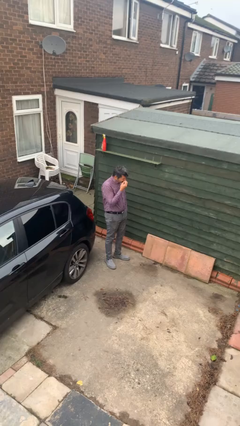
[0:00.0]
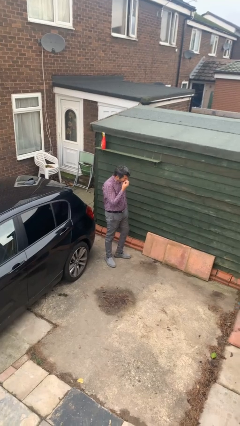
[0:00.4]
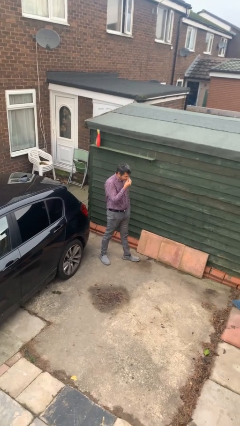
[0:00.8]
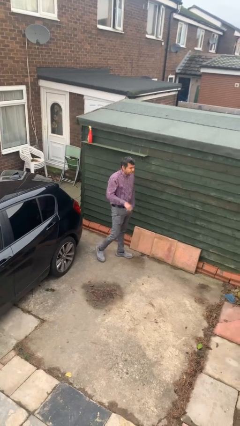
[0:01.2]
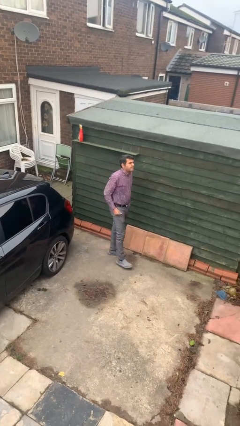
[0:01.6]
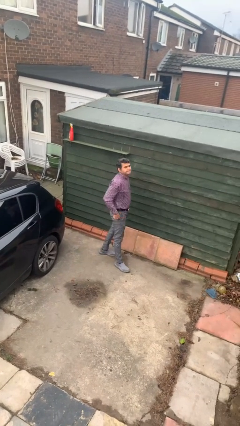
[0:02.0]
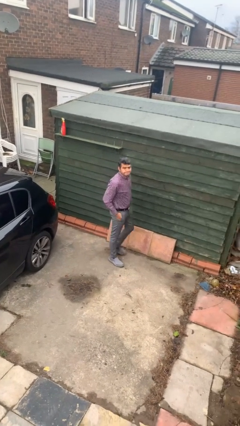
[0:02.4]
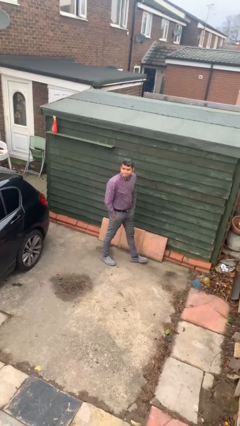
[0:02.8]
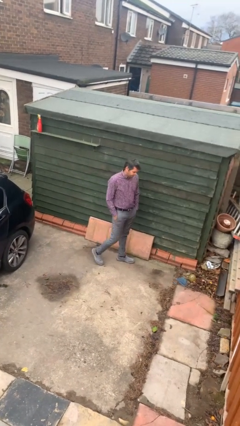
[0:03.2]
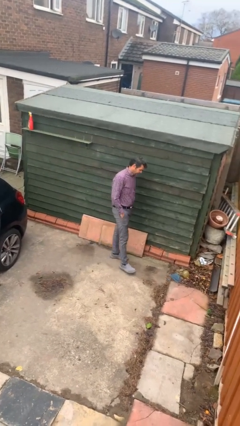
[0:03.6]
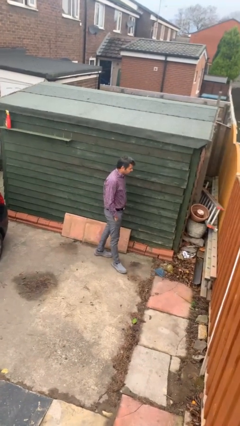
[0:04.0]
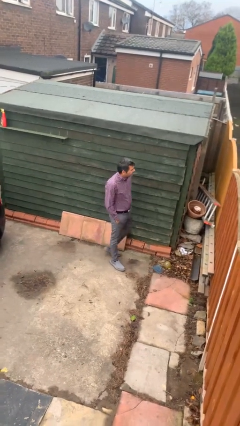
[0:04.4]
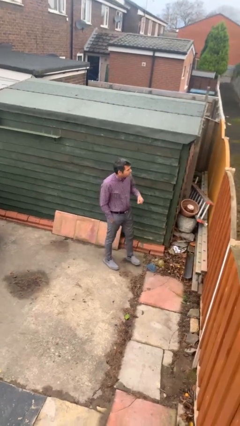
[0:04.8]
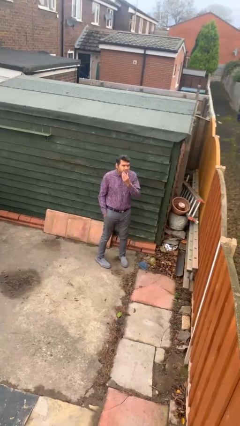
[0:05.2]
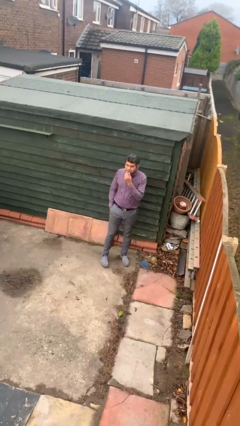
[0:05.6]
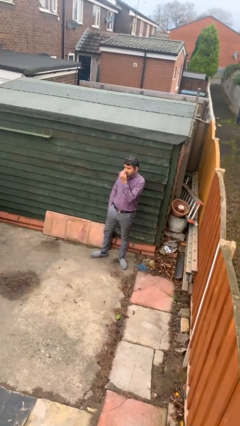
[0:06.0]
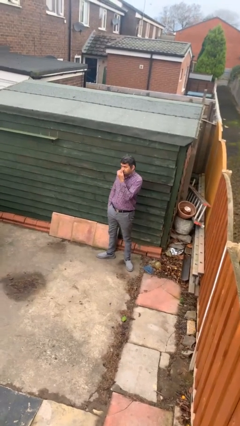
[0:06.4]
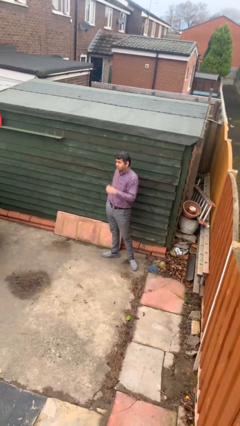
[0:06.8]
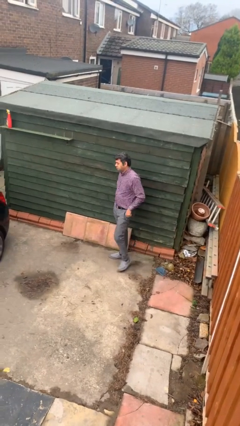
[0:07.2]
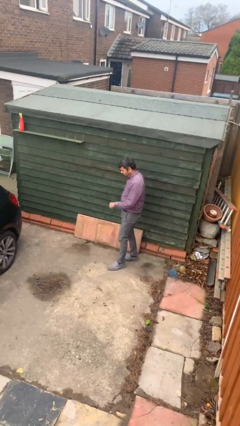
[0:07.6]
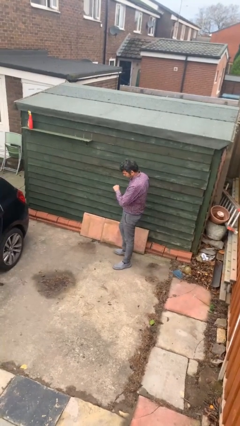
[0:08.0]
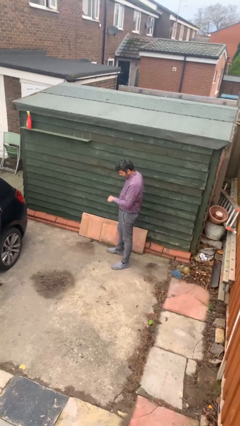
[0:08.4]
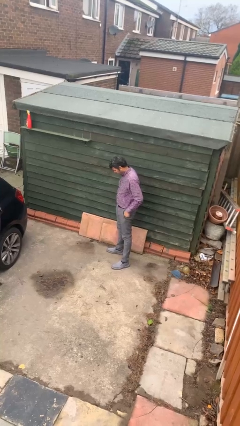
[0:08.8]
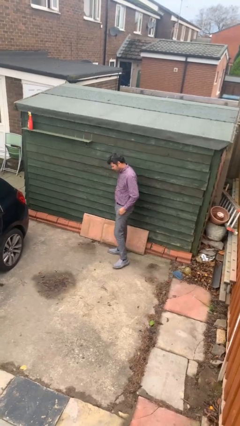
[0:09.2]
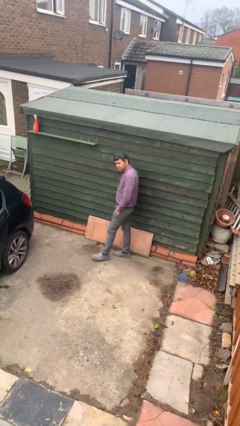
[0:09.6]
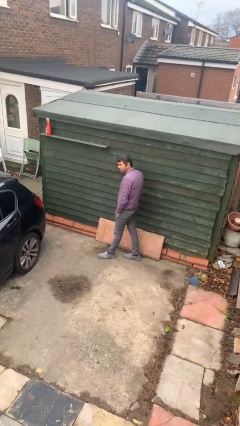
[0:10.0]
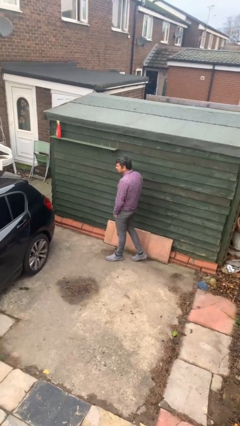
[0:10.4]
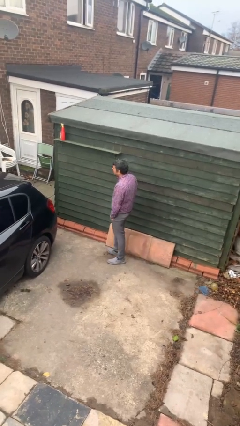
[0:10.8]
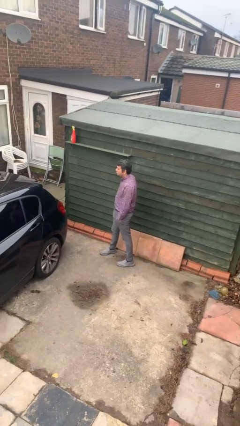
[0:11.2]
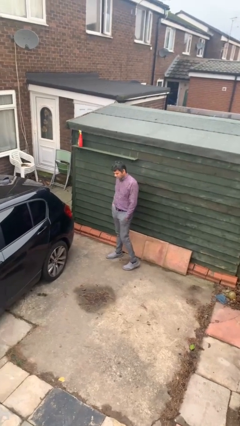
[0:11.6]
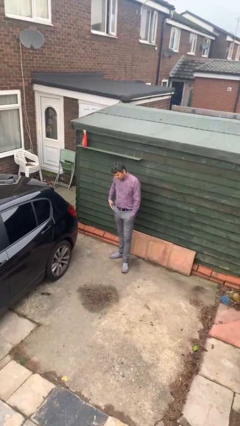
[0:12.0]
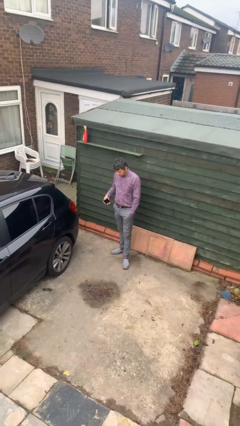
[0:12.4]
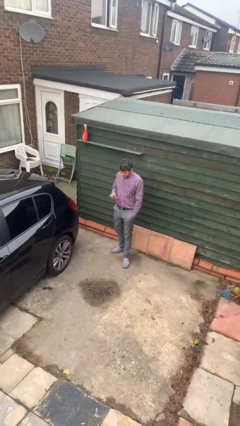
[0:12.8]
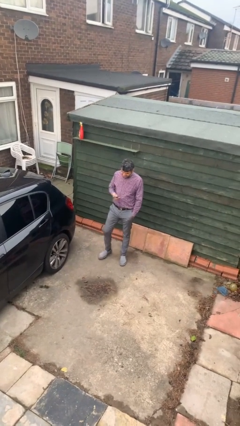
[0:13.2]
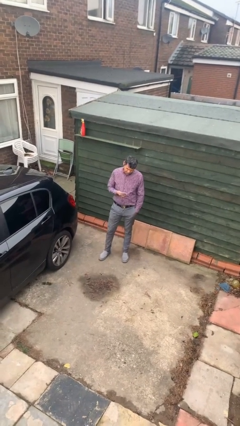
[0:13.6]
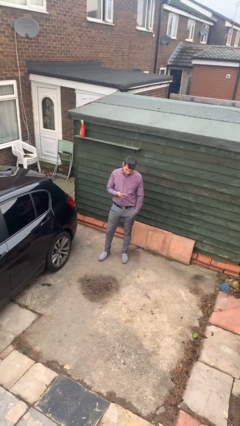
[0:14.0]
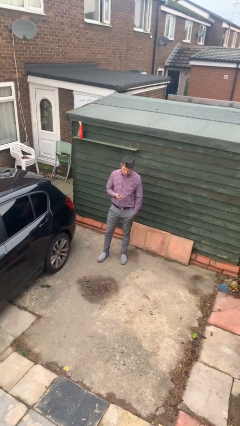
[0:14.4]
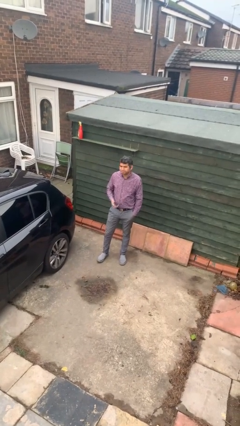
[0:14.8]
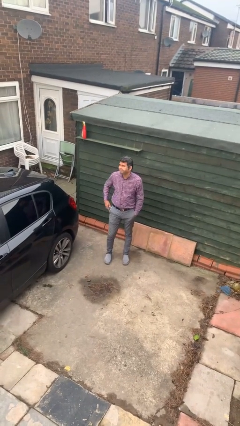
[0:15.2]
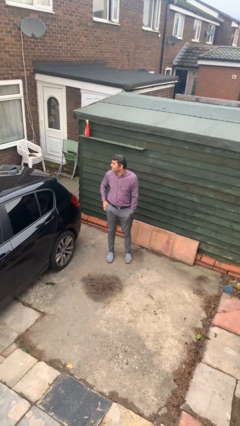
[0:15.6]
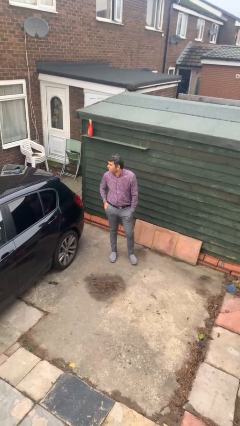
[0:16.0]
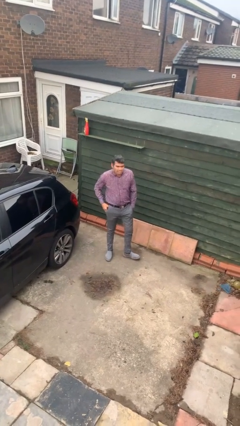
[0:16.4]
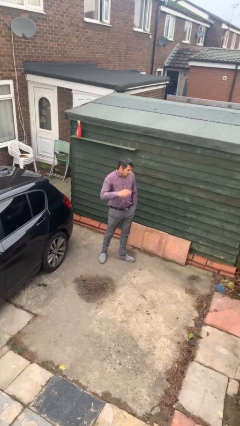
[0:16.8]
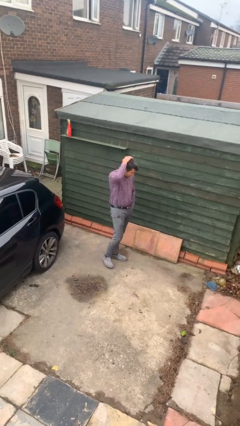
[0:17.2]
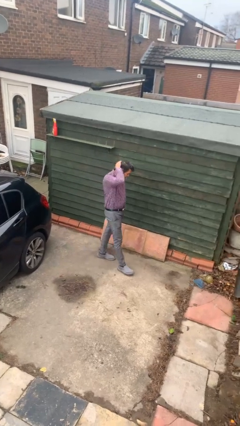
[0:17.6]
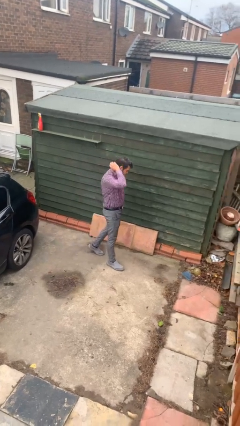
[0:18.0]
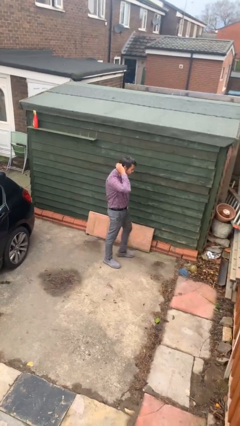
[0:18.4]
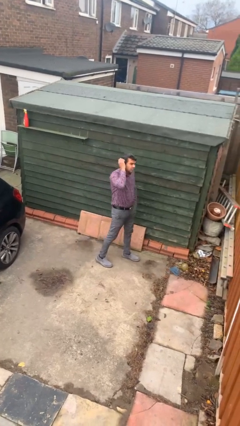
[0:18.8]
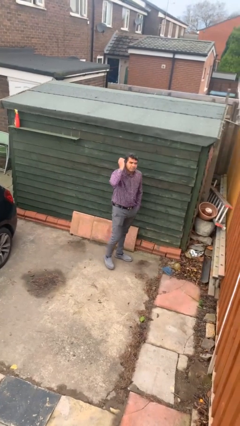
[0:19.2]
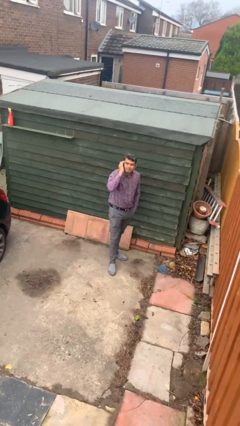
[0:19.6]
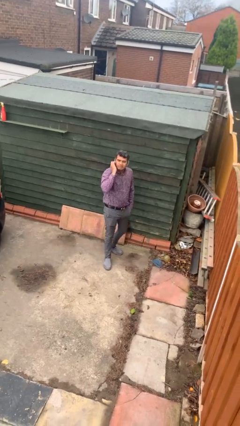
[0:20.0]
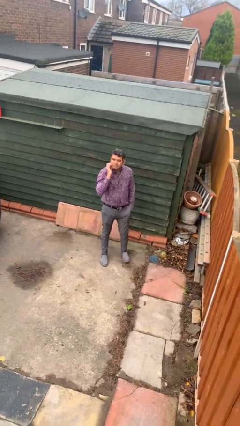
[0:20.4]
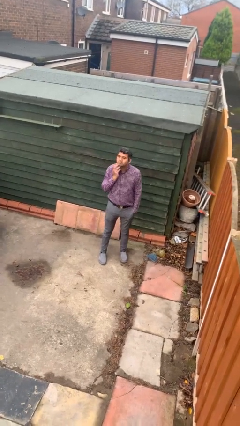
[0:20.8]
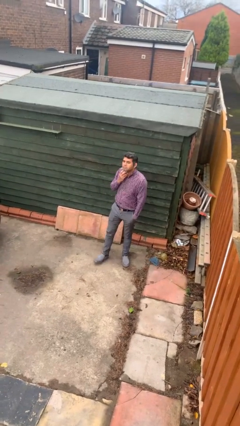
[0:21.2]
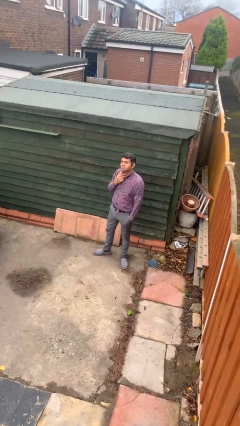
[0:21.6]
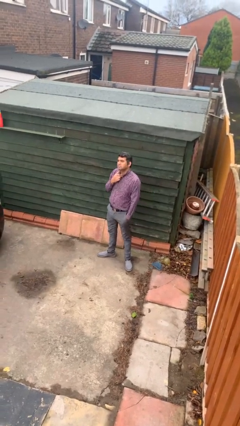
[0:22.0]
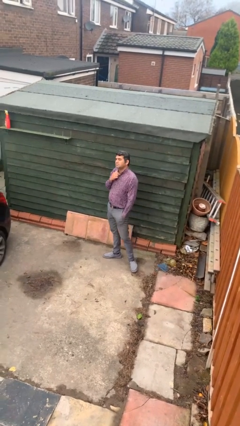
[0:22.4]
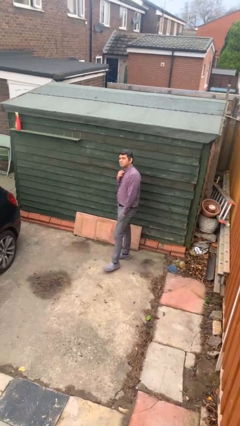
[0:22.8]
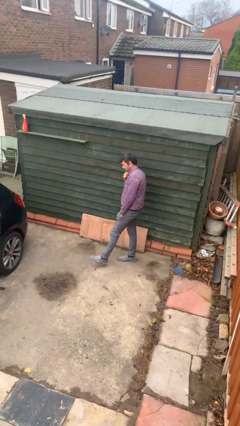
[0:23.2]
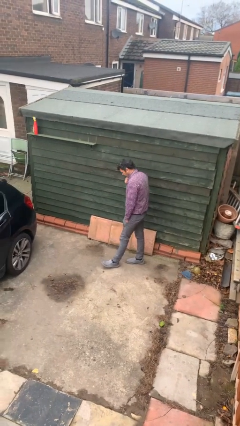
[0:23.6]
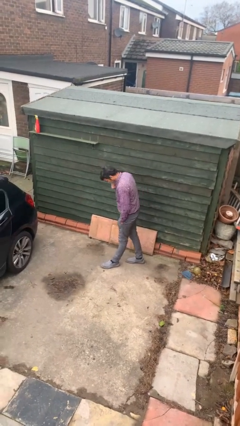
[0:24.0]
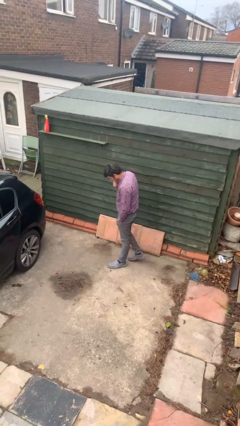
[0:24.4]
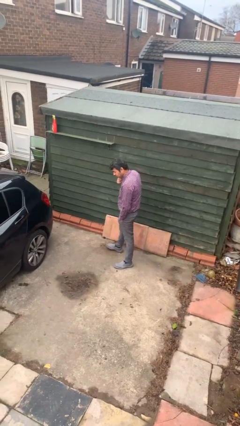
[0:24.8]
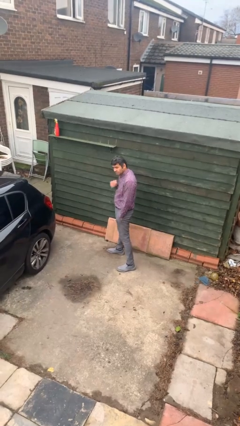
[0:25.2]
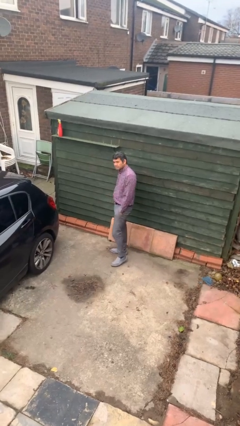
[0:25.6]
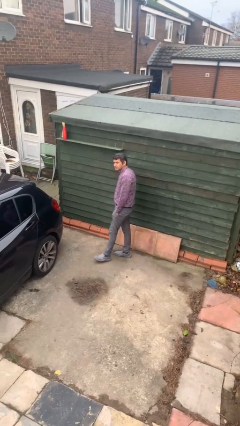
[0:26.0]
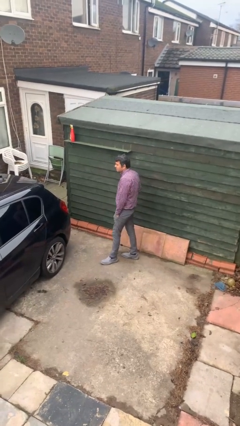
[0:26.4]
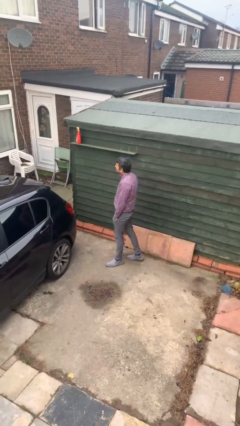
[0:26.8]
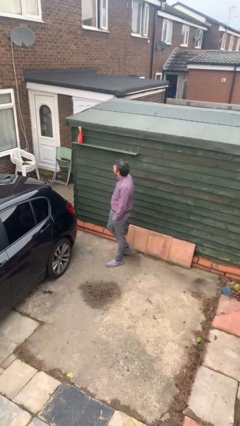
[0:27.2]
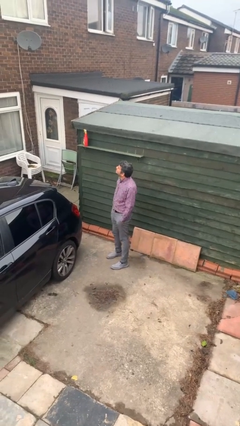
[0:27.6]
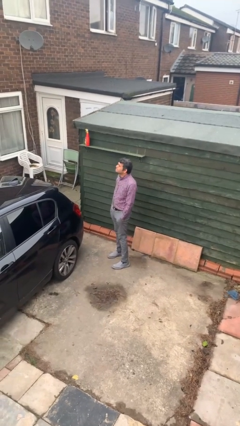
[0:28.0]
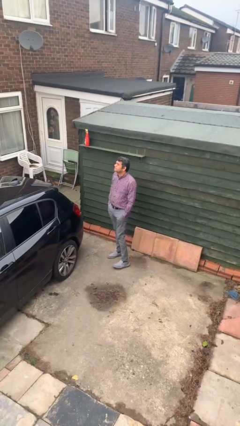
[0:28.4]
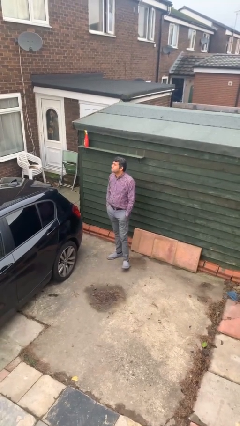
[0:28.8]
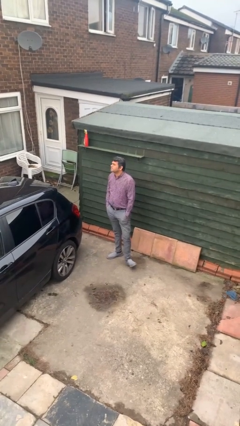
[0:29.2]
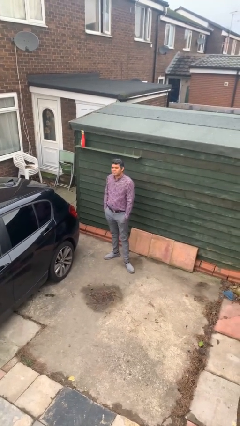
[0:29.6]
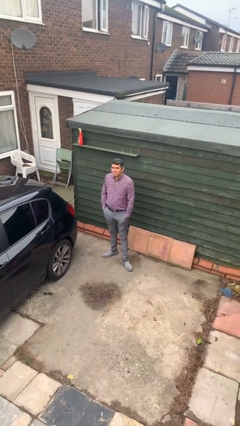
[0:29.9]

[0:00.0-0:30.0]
person walks

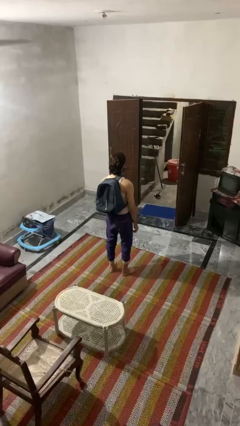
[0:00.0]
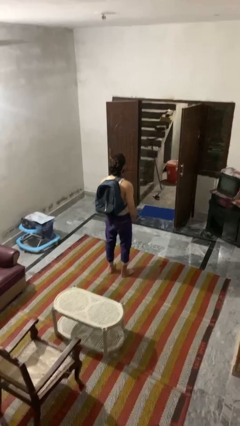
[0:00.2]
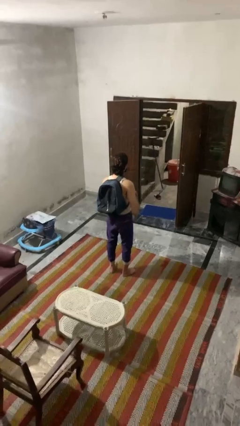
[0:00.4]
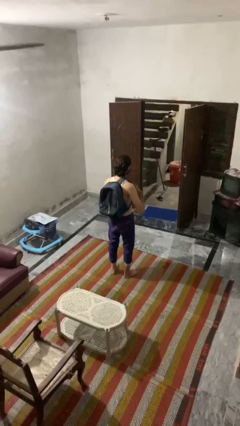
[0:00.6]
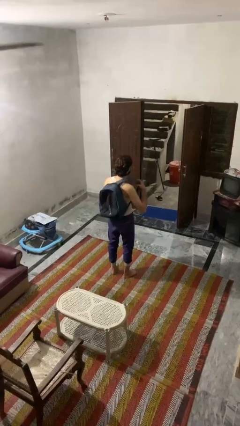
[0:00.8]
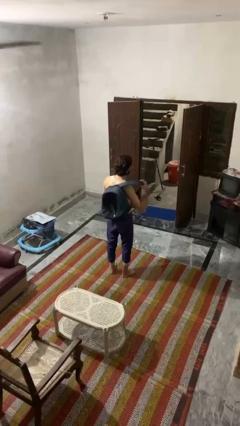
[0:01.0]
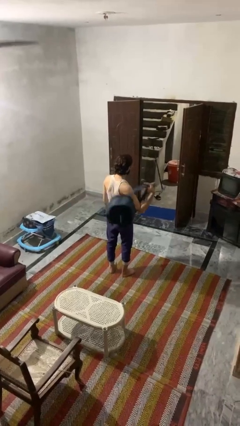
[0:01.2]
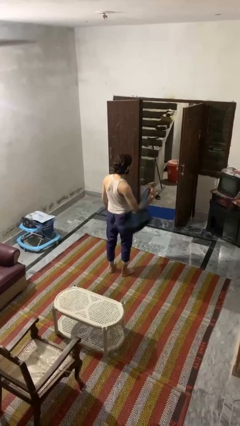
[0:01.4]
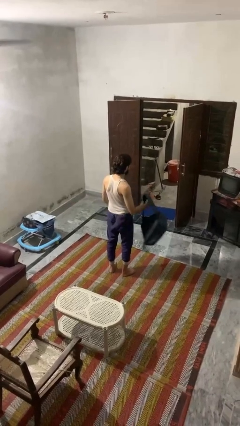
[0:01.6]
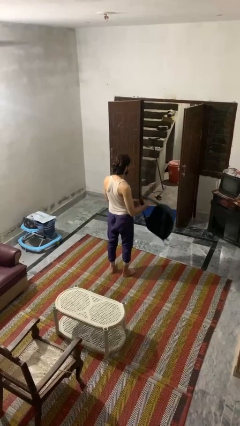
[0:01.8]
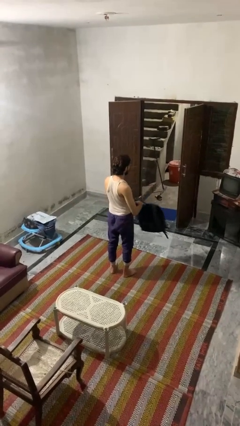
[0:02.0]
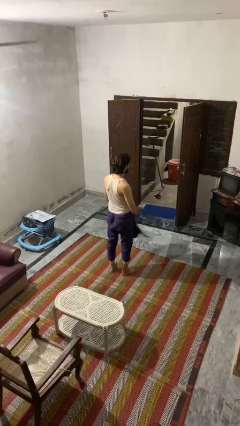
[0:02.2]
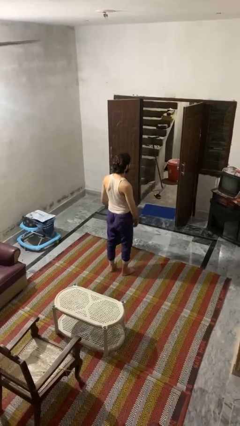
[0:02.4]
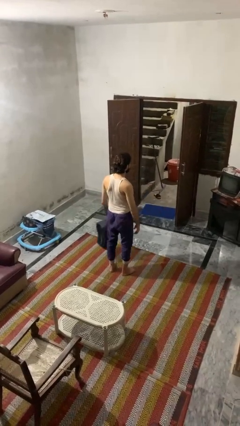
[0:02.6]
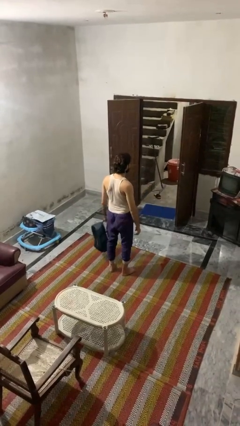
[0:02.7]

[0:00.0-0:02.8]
person takes off backpack

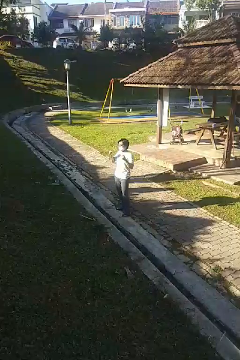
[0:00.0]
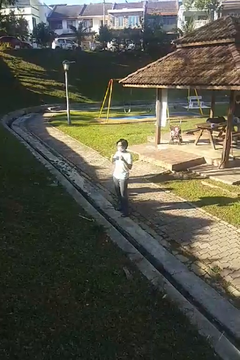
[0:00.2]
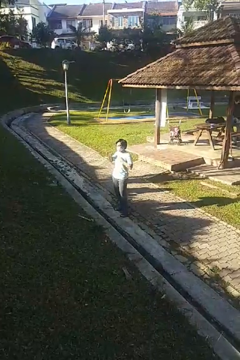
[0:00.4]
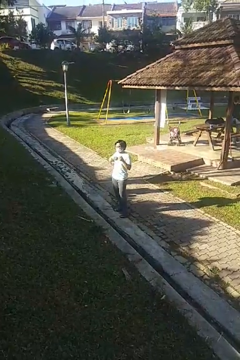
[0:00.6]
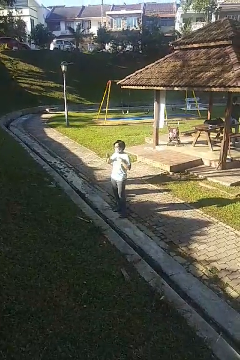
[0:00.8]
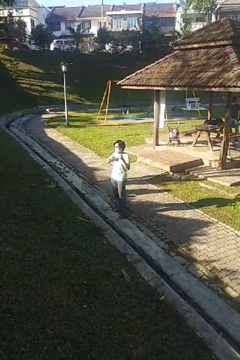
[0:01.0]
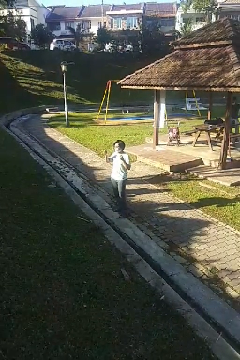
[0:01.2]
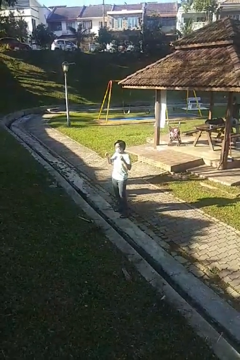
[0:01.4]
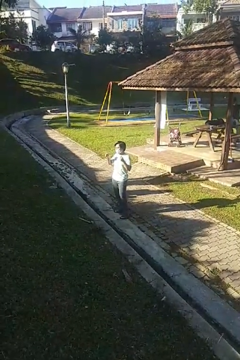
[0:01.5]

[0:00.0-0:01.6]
person drums on chest
